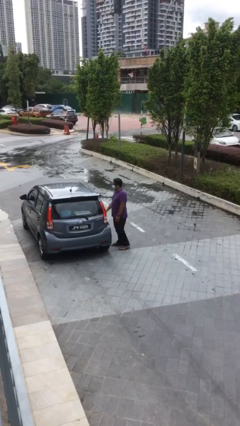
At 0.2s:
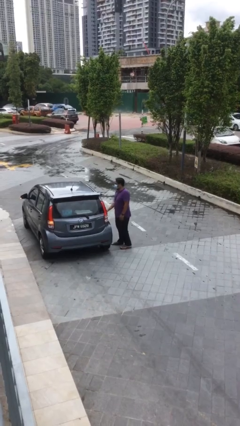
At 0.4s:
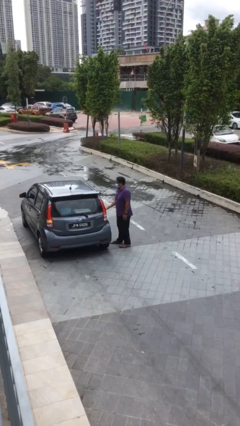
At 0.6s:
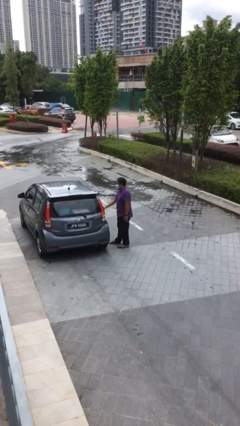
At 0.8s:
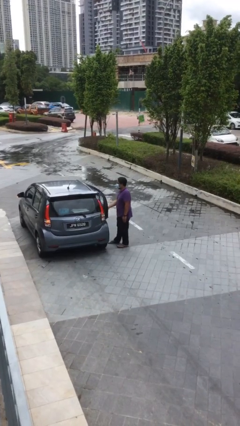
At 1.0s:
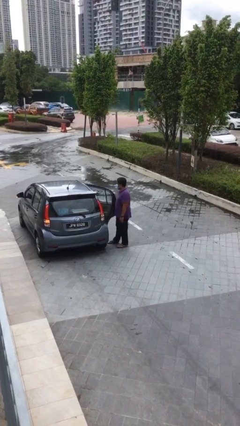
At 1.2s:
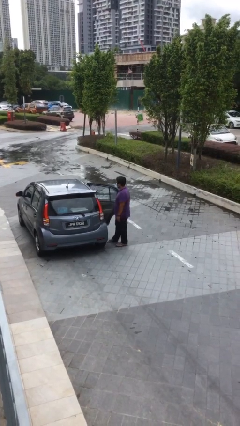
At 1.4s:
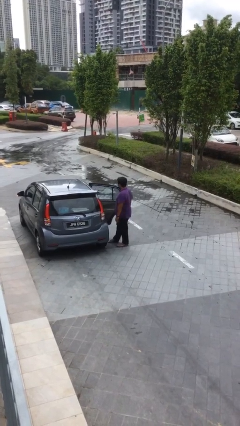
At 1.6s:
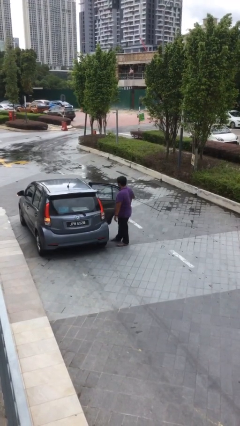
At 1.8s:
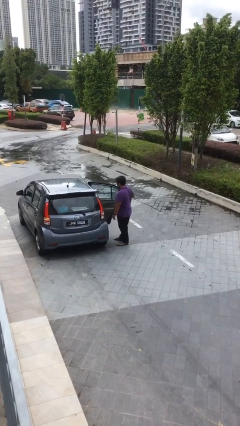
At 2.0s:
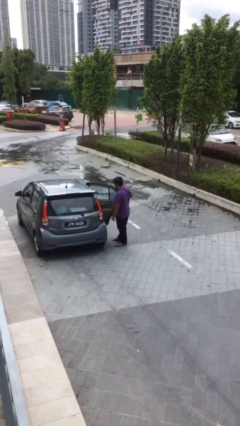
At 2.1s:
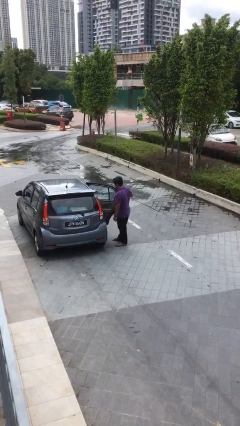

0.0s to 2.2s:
person opens car door

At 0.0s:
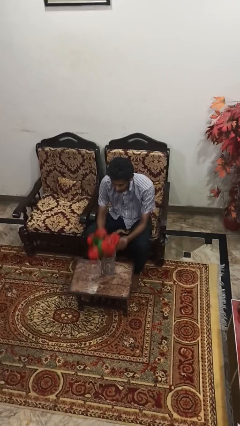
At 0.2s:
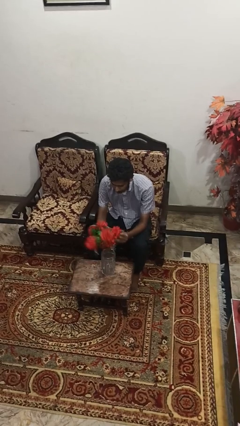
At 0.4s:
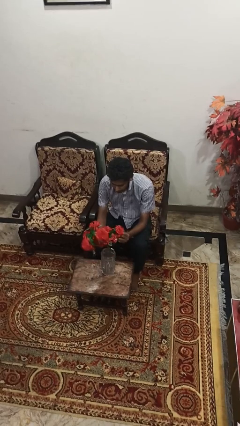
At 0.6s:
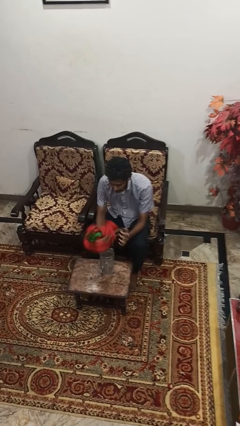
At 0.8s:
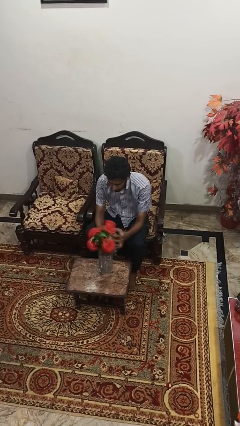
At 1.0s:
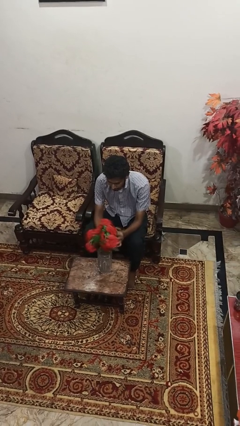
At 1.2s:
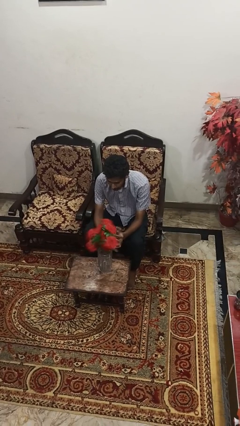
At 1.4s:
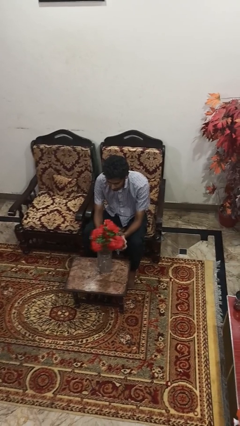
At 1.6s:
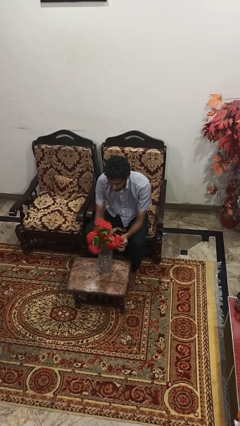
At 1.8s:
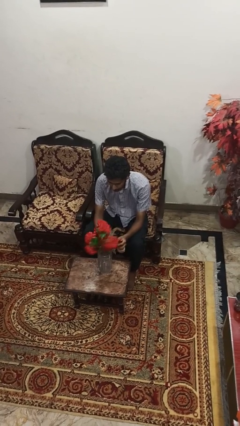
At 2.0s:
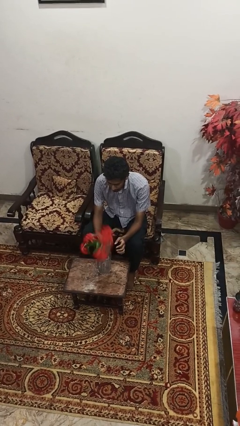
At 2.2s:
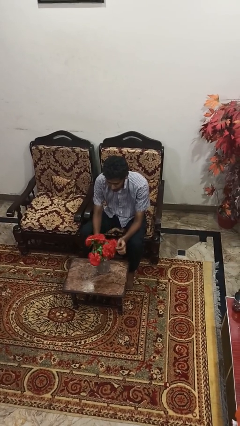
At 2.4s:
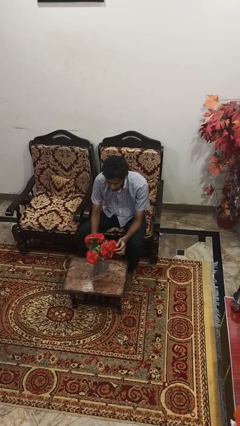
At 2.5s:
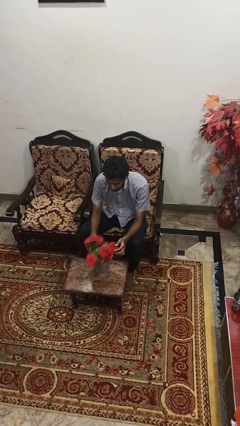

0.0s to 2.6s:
person arranges flowers in vase

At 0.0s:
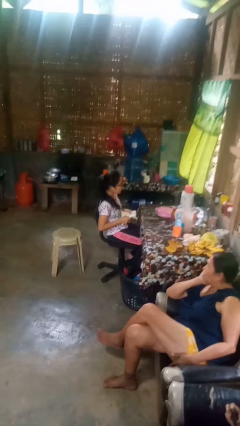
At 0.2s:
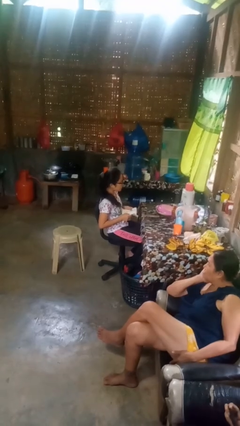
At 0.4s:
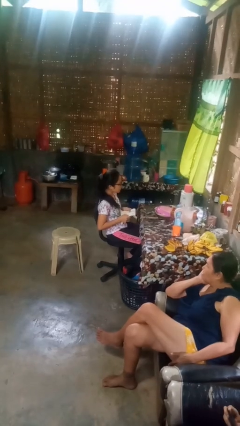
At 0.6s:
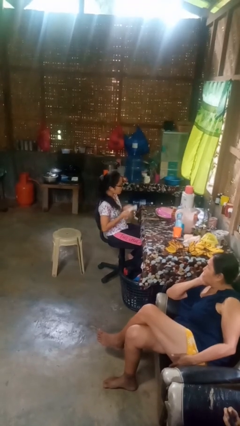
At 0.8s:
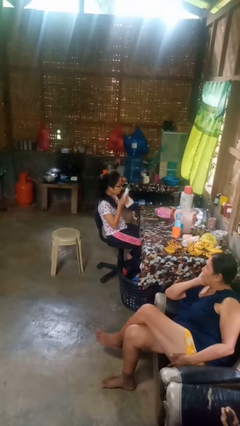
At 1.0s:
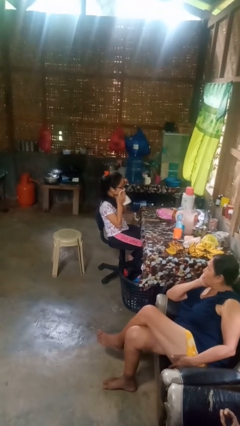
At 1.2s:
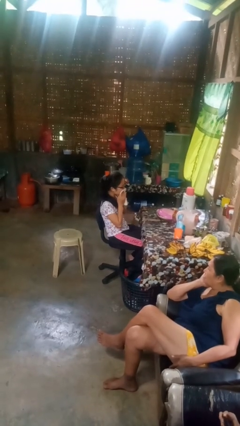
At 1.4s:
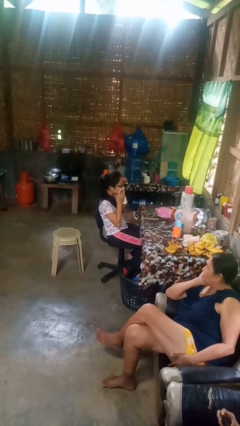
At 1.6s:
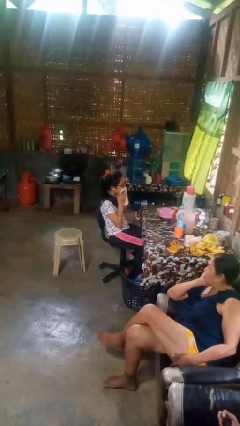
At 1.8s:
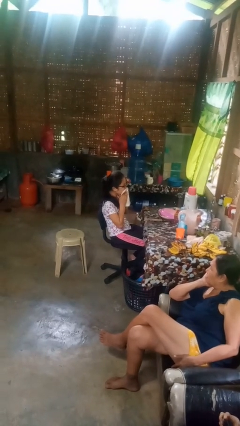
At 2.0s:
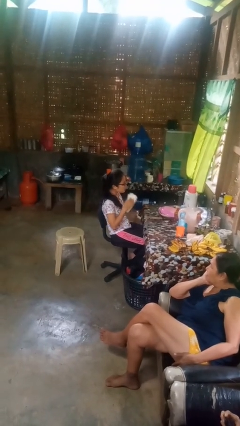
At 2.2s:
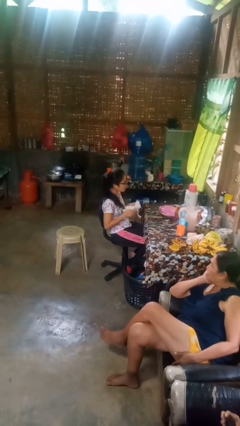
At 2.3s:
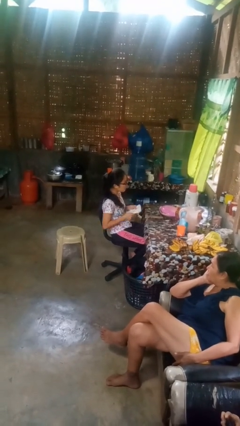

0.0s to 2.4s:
person wipes mouth with napkin

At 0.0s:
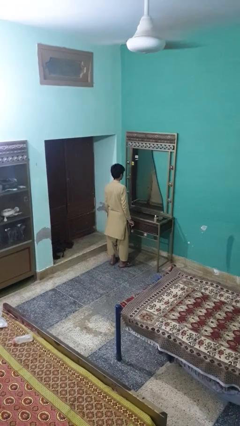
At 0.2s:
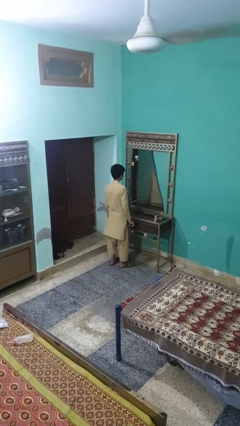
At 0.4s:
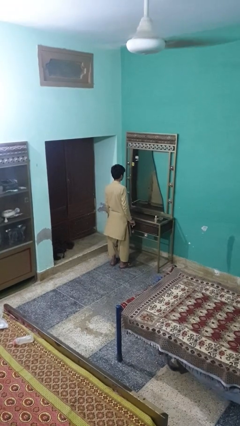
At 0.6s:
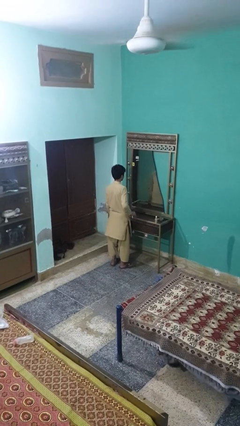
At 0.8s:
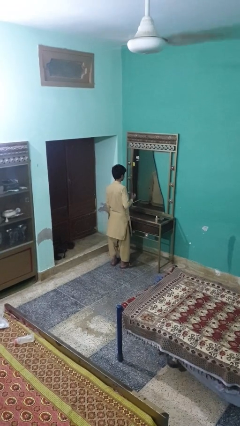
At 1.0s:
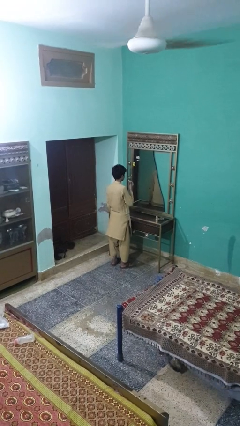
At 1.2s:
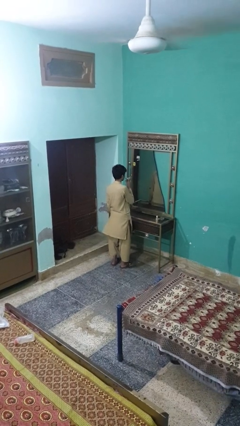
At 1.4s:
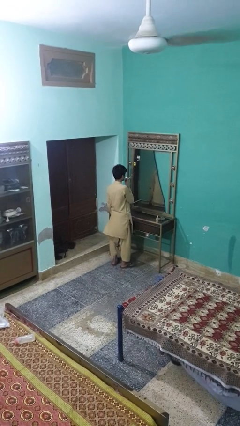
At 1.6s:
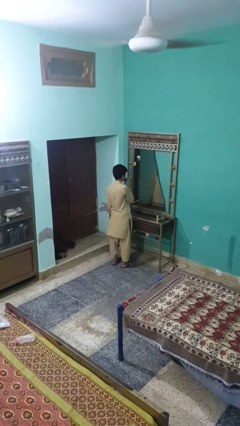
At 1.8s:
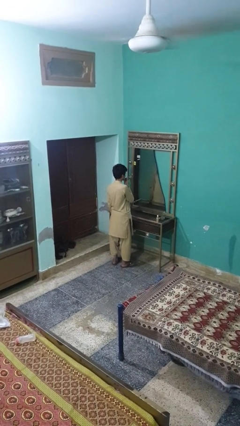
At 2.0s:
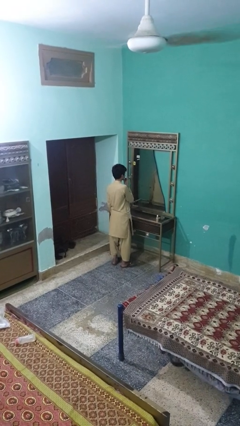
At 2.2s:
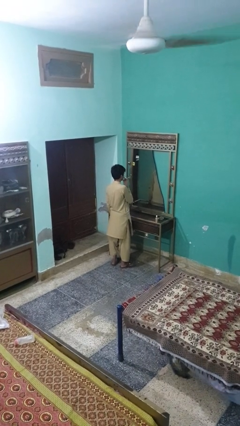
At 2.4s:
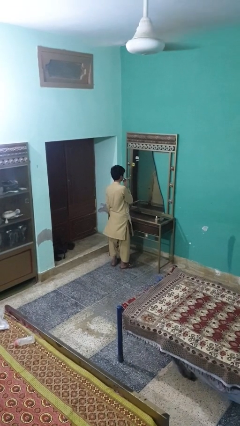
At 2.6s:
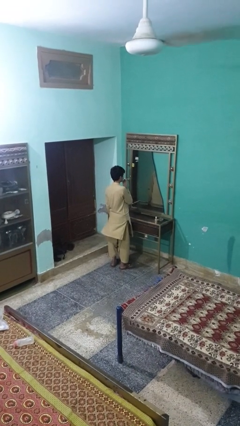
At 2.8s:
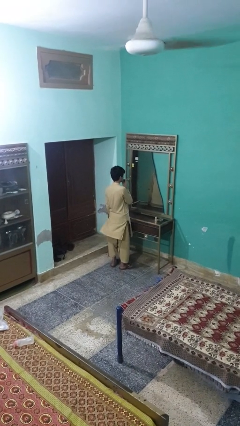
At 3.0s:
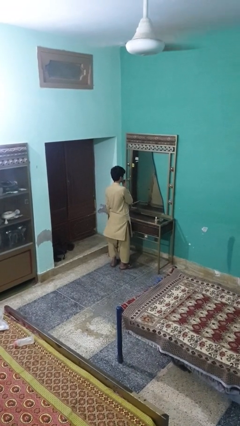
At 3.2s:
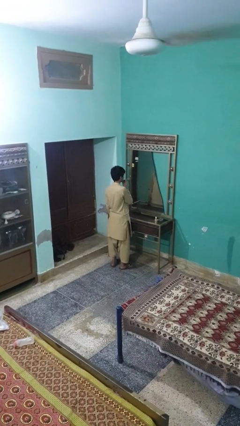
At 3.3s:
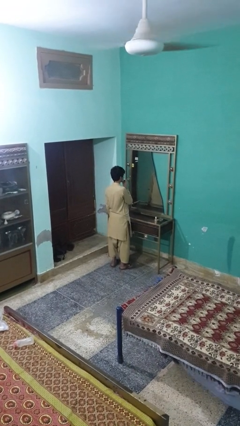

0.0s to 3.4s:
person applies lip makeup

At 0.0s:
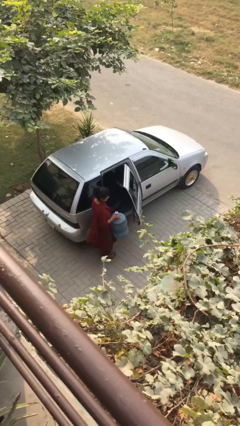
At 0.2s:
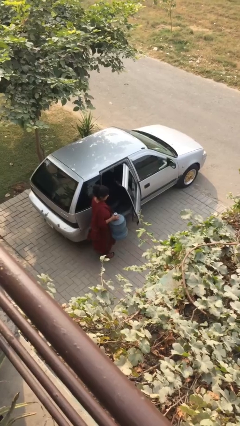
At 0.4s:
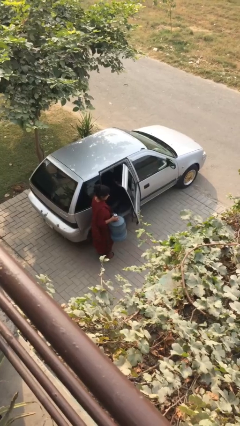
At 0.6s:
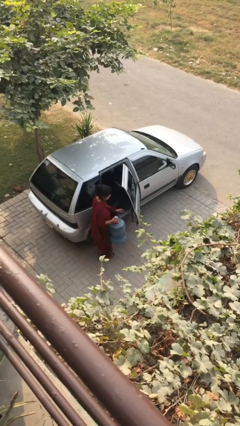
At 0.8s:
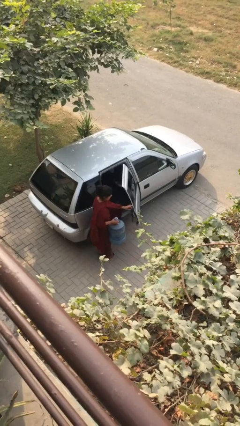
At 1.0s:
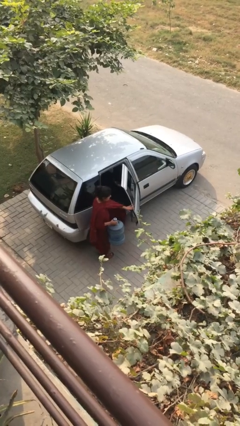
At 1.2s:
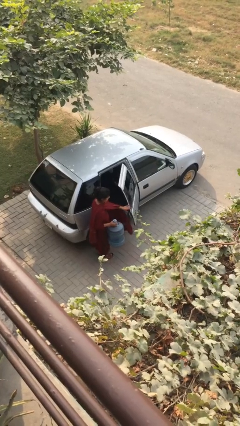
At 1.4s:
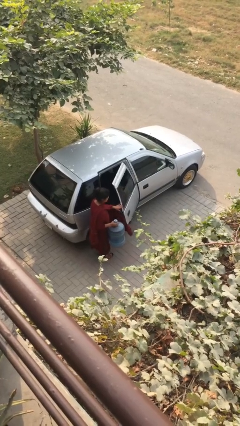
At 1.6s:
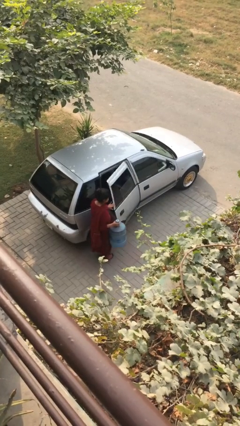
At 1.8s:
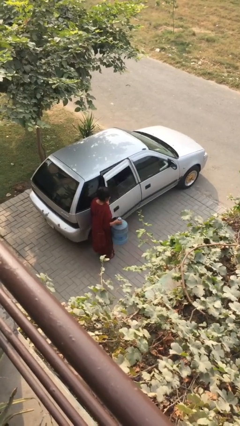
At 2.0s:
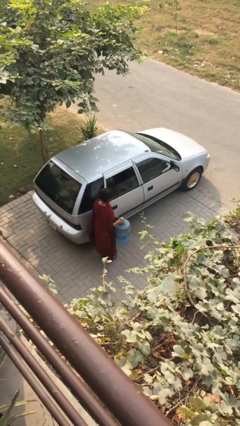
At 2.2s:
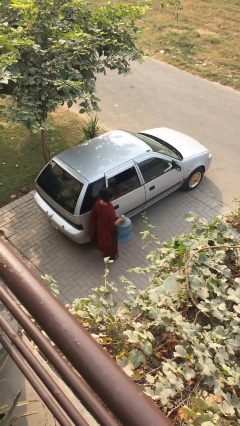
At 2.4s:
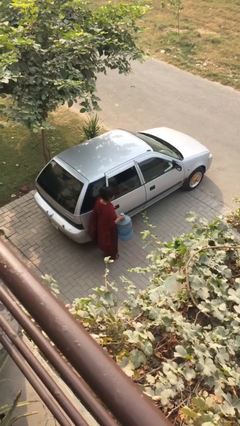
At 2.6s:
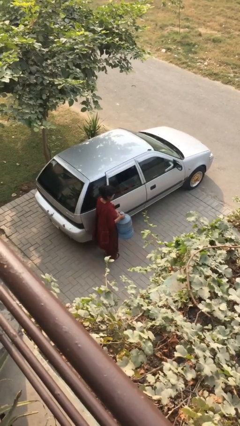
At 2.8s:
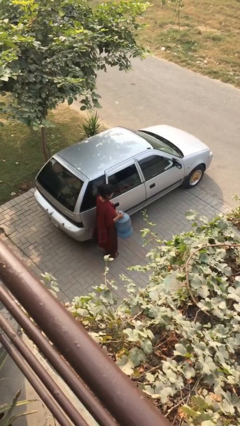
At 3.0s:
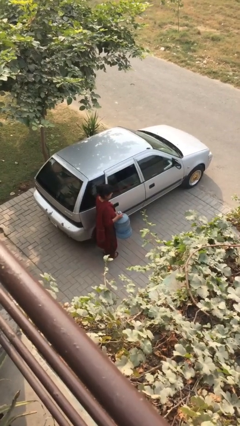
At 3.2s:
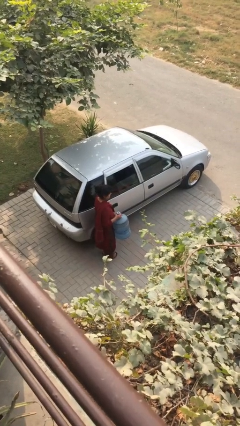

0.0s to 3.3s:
person closes car door

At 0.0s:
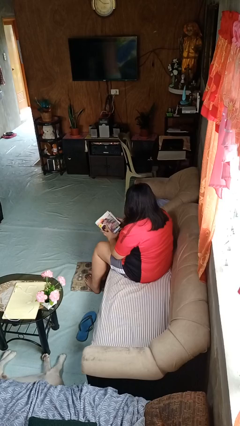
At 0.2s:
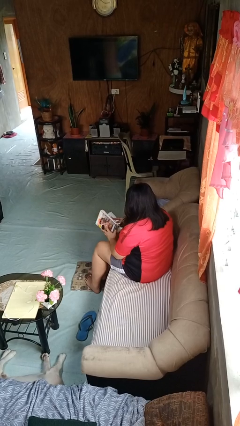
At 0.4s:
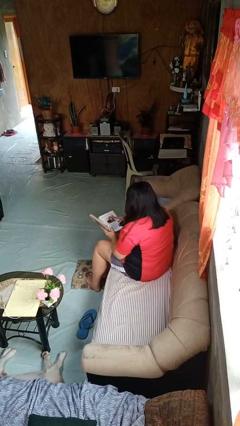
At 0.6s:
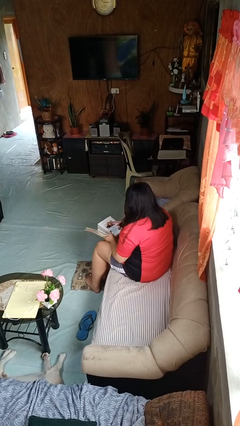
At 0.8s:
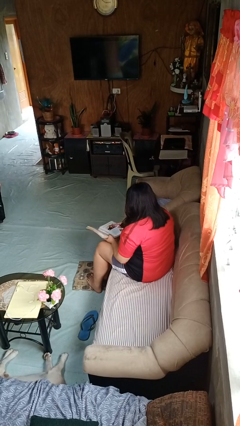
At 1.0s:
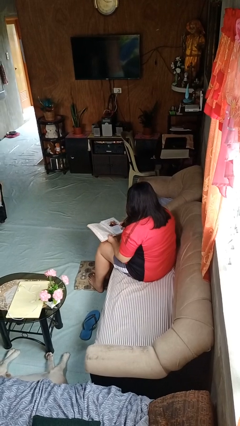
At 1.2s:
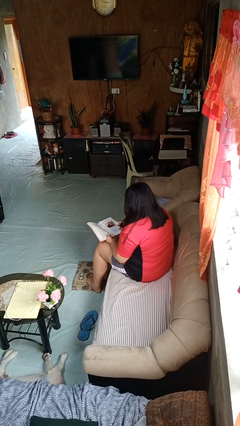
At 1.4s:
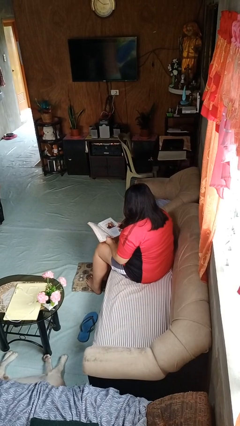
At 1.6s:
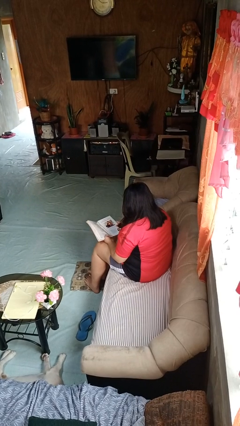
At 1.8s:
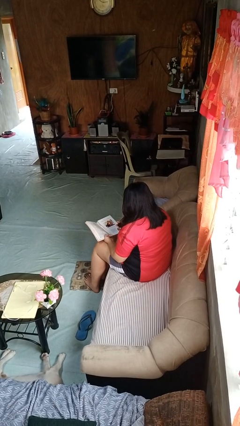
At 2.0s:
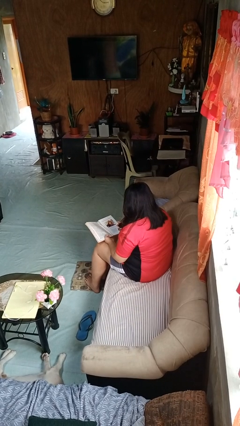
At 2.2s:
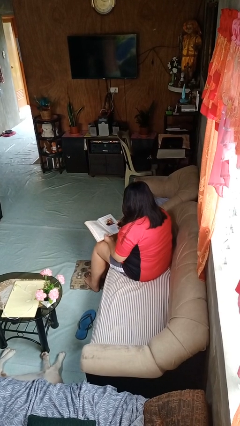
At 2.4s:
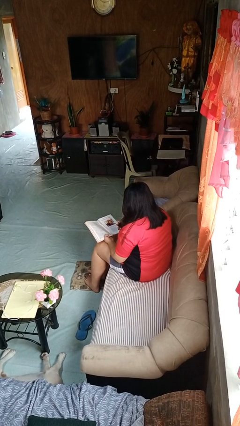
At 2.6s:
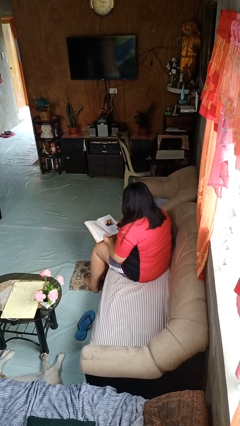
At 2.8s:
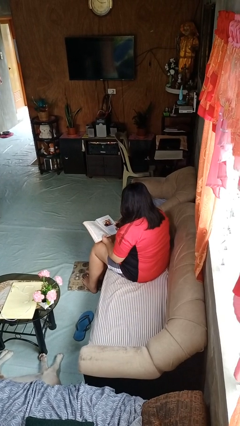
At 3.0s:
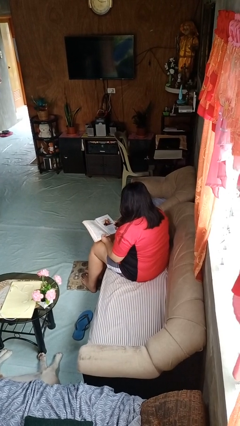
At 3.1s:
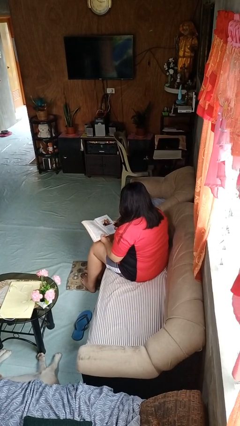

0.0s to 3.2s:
person reads book

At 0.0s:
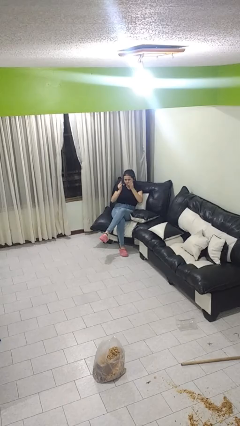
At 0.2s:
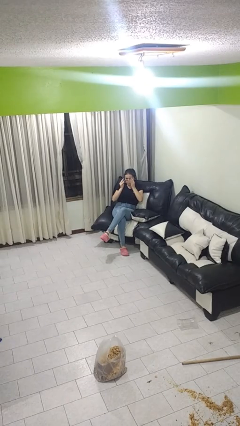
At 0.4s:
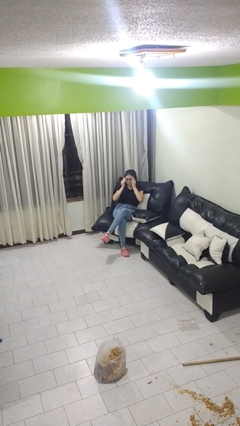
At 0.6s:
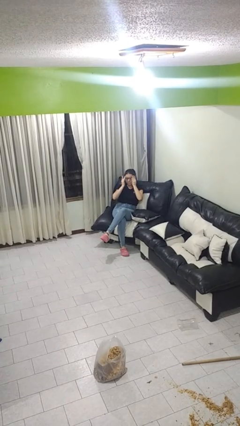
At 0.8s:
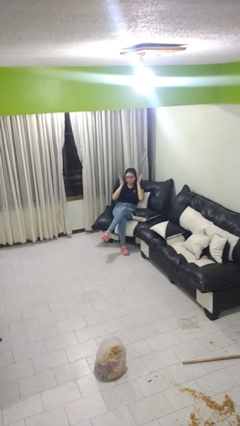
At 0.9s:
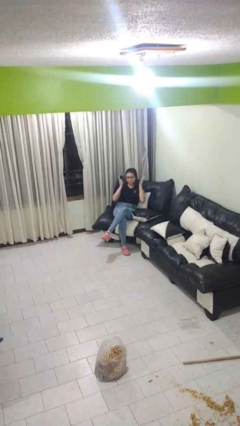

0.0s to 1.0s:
person puts on glasses
